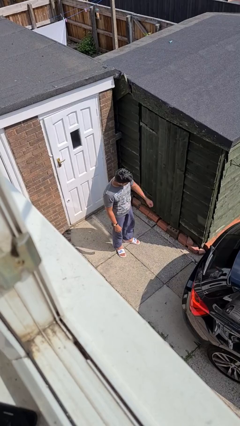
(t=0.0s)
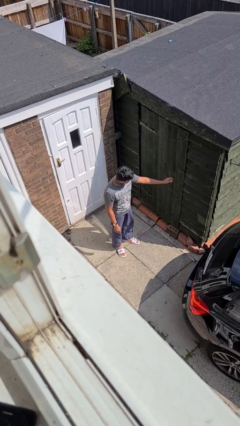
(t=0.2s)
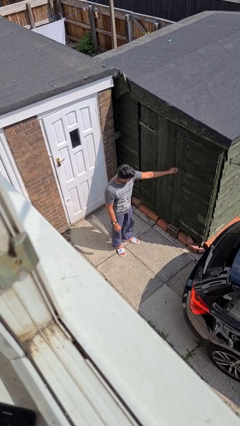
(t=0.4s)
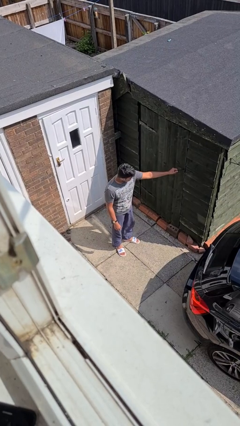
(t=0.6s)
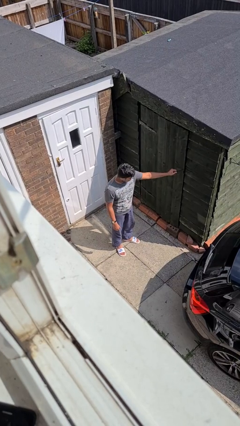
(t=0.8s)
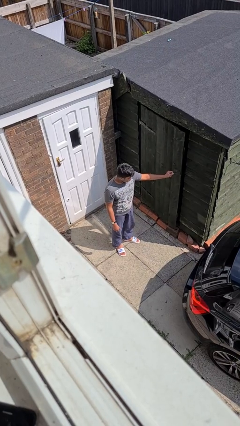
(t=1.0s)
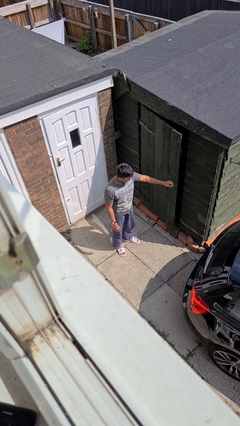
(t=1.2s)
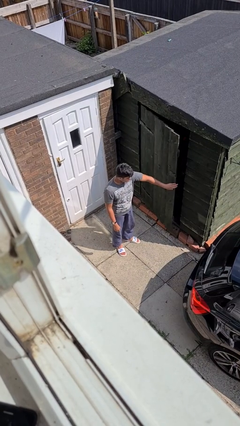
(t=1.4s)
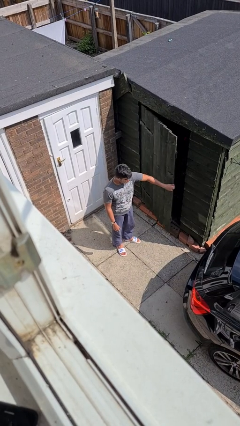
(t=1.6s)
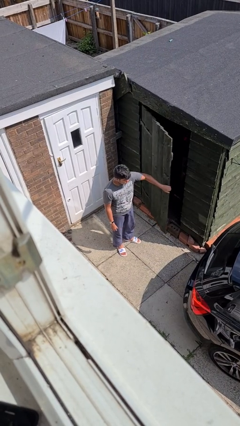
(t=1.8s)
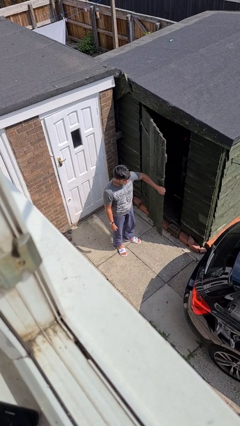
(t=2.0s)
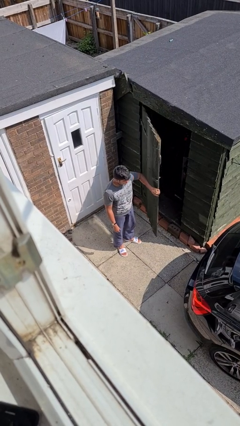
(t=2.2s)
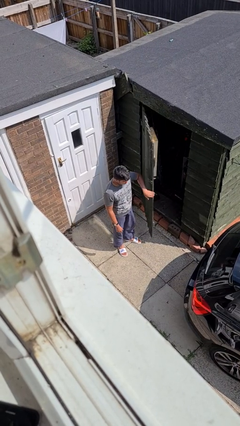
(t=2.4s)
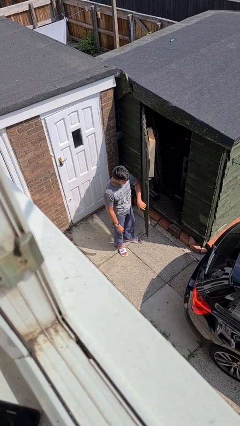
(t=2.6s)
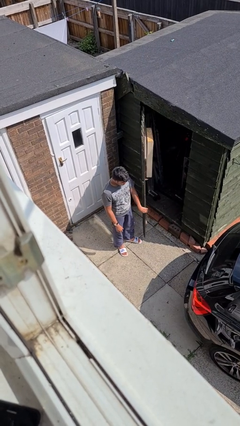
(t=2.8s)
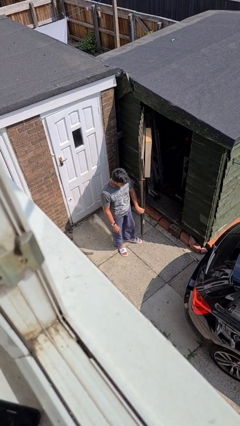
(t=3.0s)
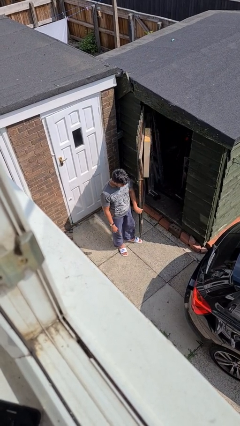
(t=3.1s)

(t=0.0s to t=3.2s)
person opens facility door

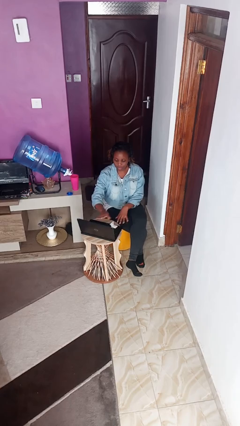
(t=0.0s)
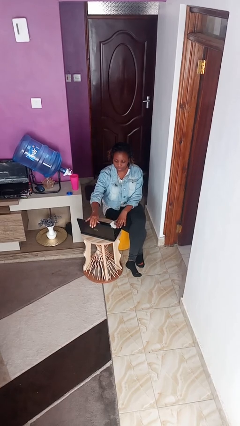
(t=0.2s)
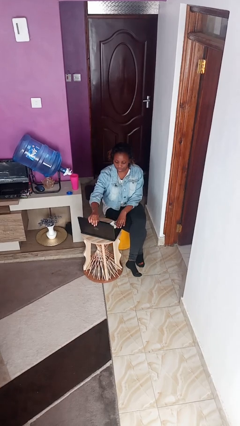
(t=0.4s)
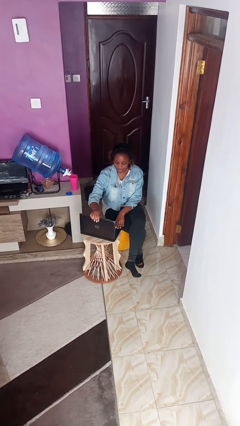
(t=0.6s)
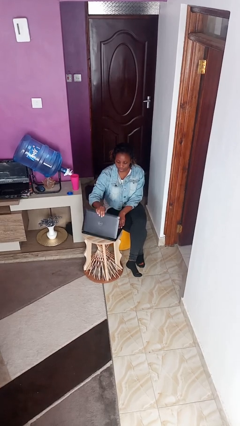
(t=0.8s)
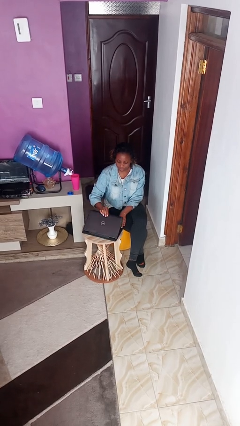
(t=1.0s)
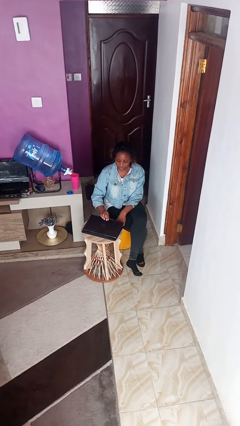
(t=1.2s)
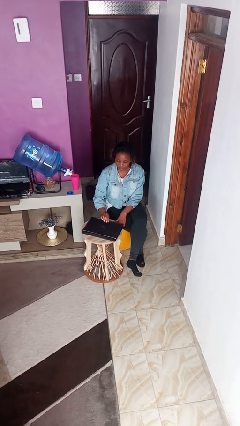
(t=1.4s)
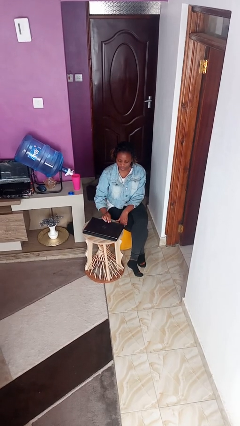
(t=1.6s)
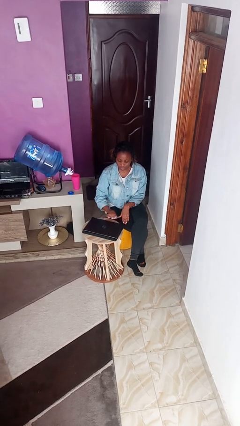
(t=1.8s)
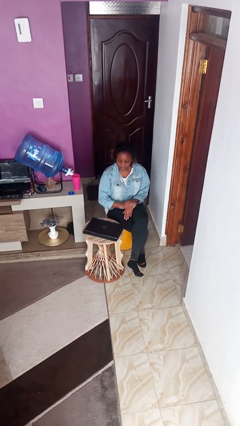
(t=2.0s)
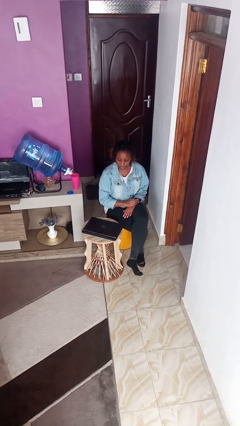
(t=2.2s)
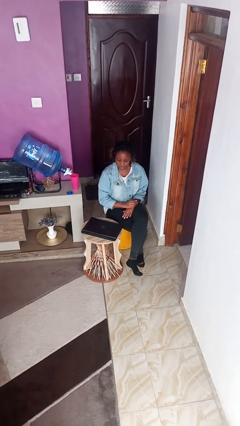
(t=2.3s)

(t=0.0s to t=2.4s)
person closes laptop

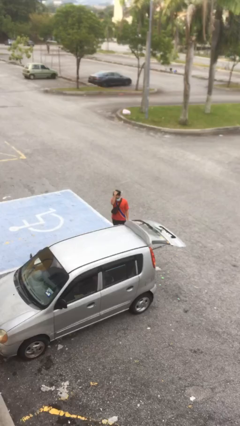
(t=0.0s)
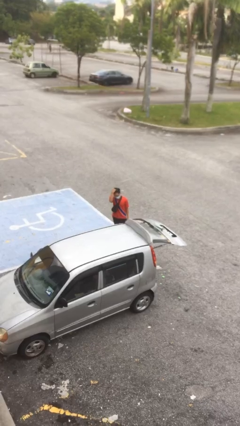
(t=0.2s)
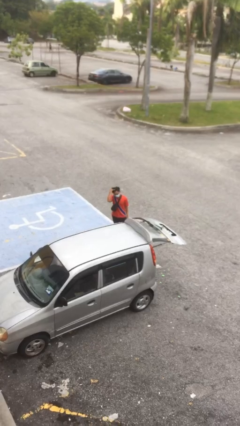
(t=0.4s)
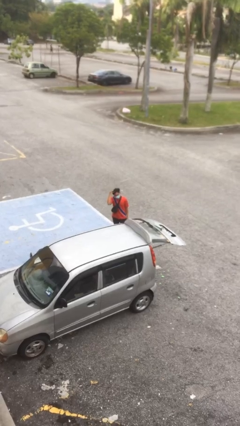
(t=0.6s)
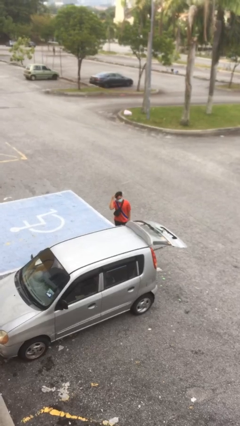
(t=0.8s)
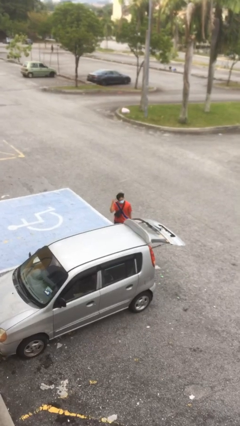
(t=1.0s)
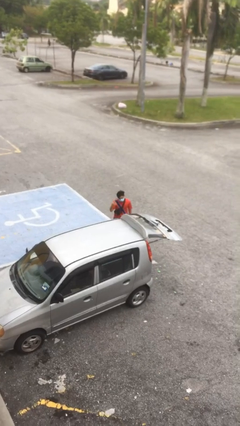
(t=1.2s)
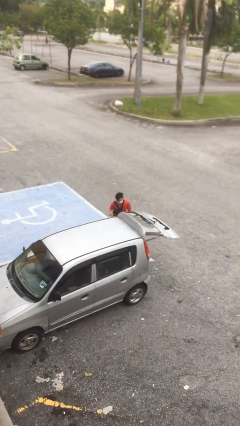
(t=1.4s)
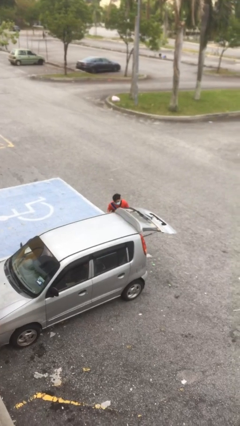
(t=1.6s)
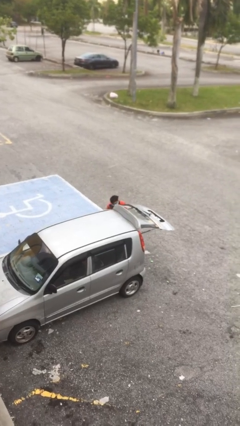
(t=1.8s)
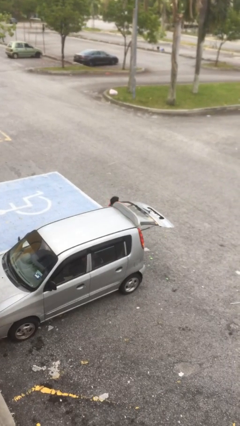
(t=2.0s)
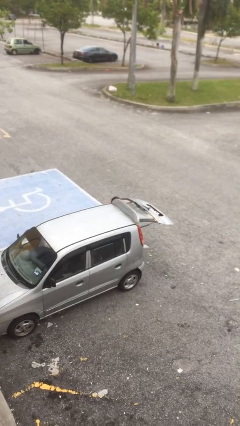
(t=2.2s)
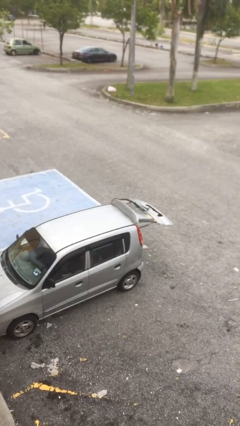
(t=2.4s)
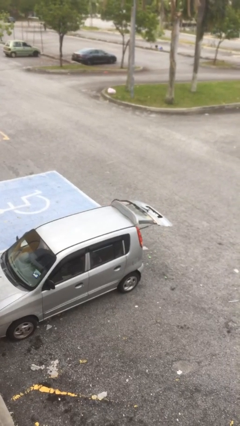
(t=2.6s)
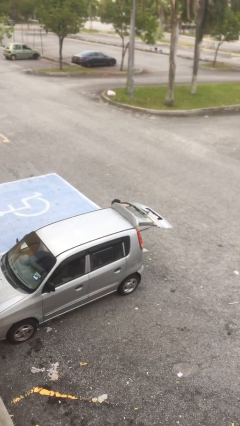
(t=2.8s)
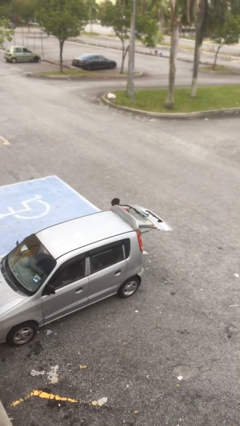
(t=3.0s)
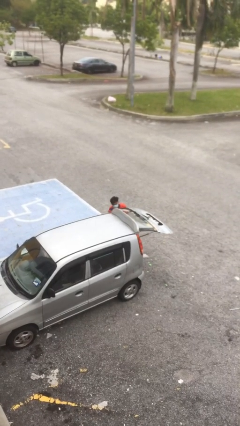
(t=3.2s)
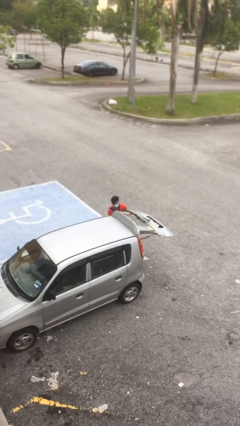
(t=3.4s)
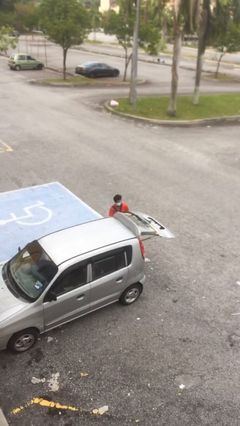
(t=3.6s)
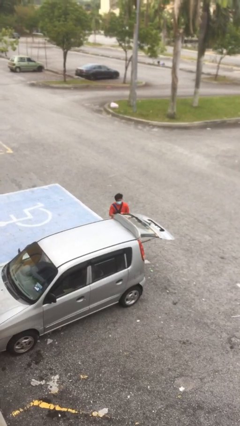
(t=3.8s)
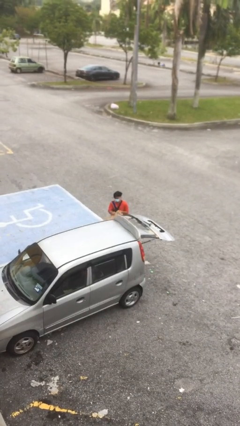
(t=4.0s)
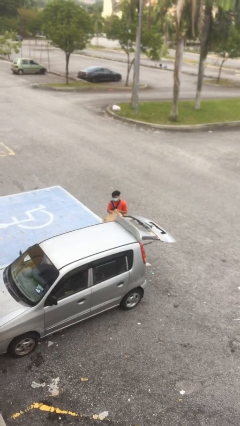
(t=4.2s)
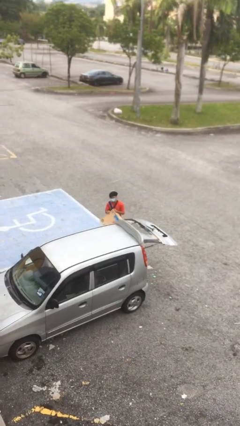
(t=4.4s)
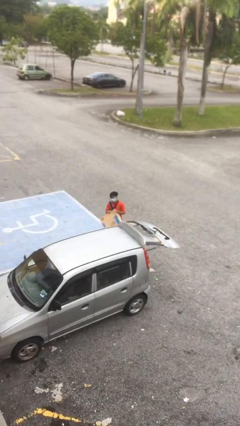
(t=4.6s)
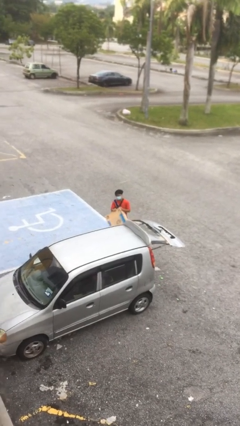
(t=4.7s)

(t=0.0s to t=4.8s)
person unloads car

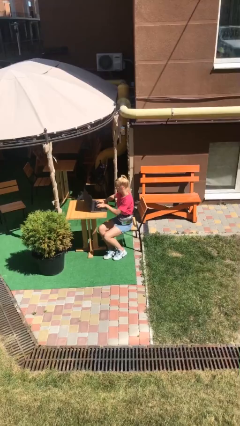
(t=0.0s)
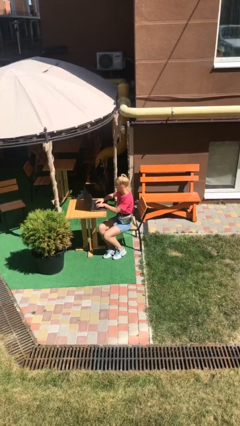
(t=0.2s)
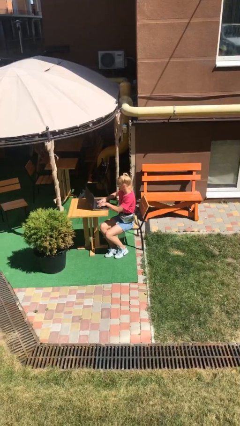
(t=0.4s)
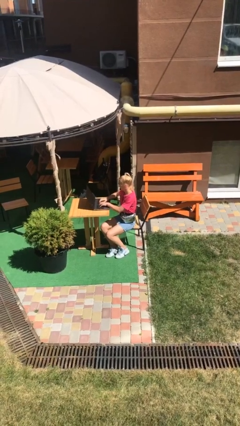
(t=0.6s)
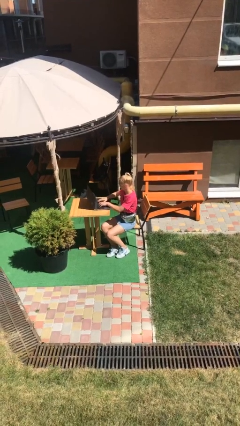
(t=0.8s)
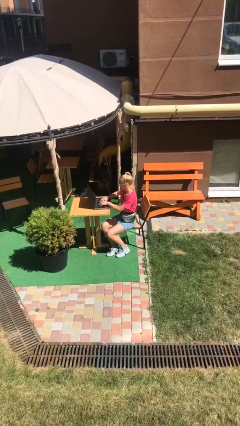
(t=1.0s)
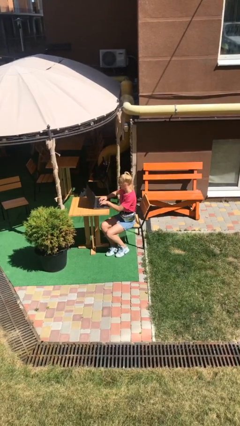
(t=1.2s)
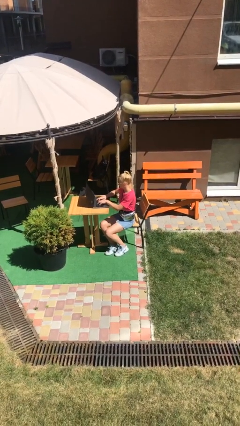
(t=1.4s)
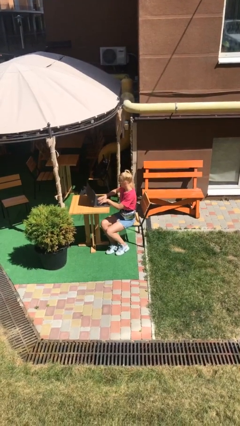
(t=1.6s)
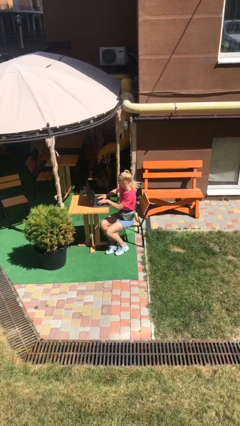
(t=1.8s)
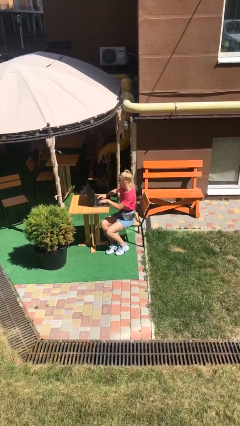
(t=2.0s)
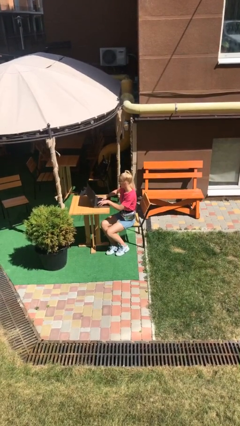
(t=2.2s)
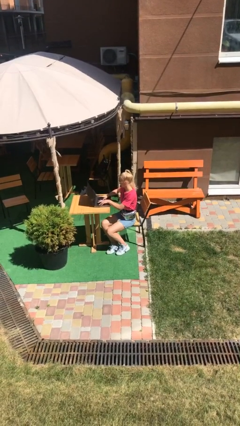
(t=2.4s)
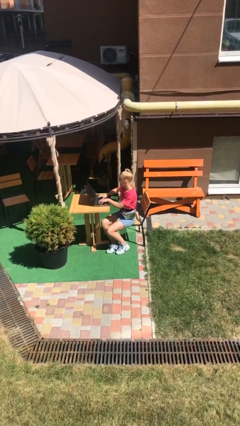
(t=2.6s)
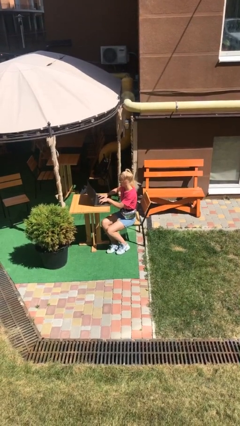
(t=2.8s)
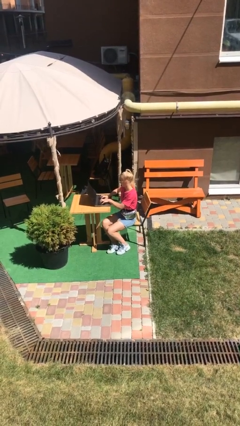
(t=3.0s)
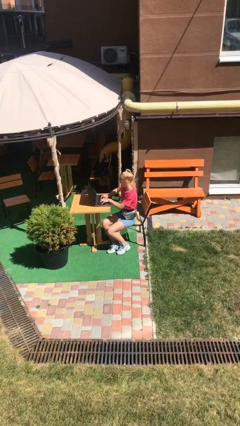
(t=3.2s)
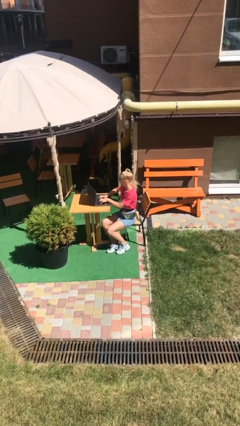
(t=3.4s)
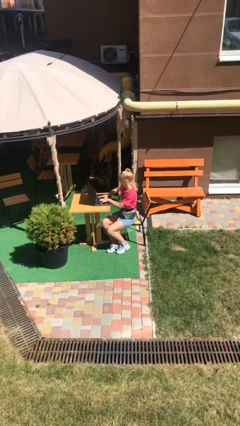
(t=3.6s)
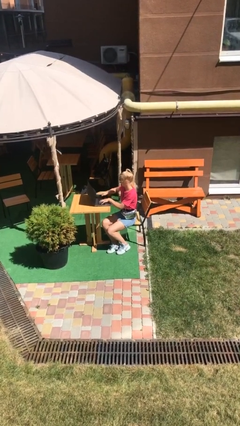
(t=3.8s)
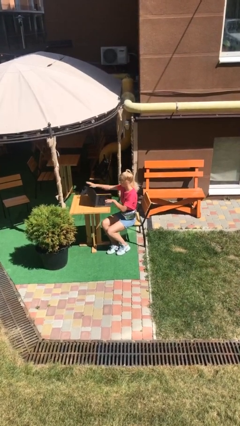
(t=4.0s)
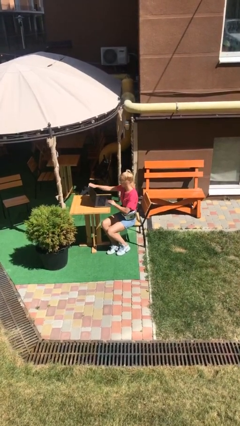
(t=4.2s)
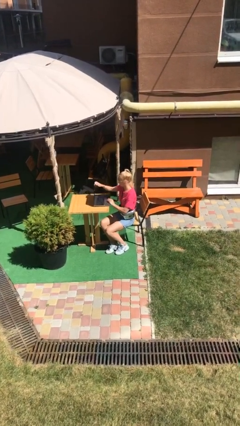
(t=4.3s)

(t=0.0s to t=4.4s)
person interacts with laptop

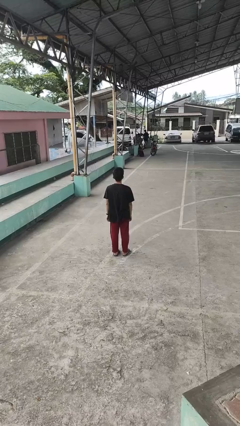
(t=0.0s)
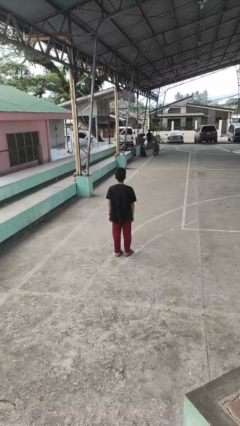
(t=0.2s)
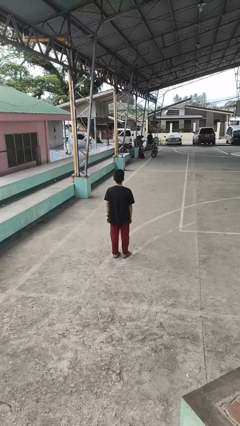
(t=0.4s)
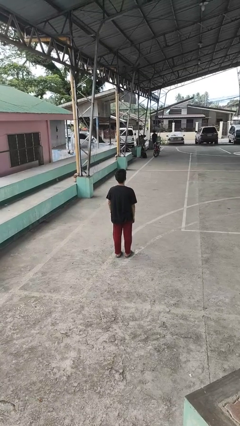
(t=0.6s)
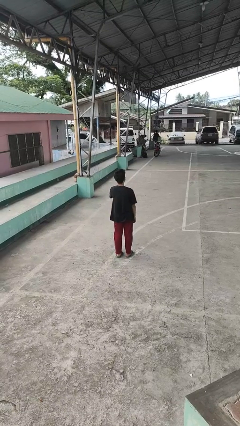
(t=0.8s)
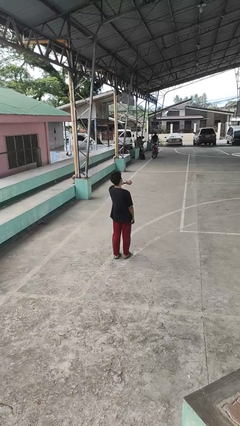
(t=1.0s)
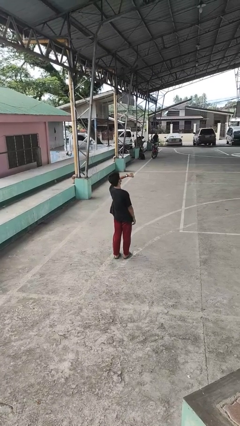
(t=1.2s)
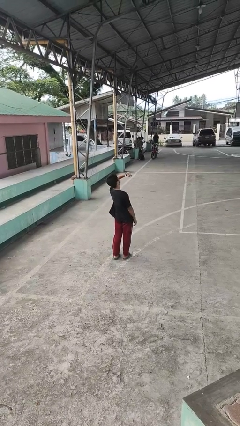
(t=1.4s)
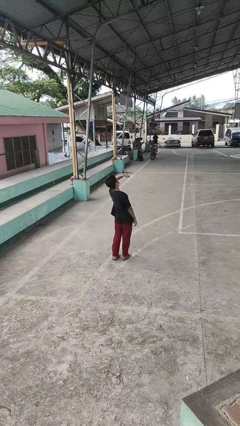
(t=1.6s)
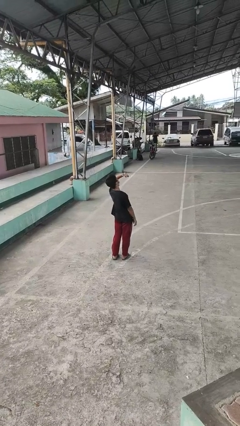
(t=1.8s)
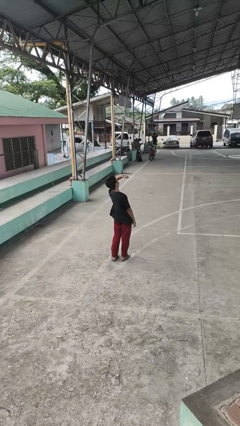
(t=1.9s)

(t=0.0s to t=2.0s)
person looks at wristwatch

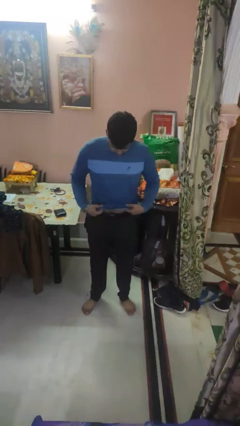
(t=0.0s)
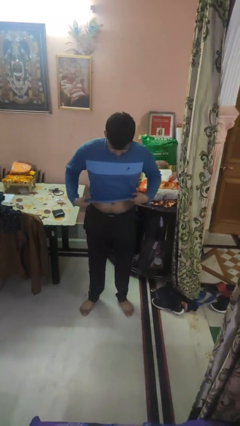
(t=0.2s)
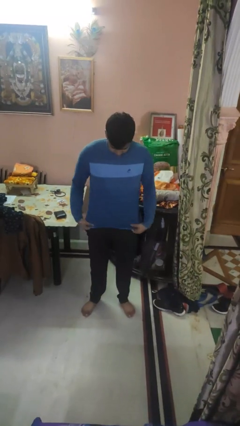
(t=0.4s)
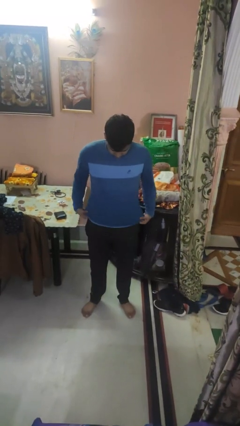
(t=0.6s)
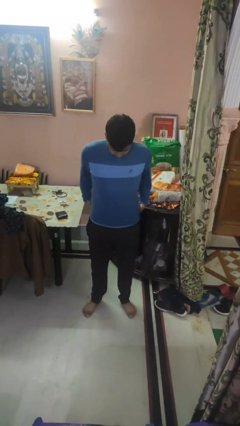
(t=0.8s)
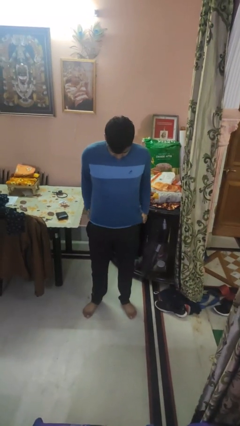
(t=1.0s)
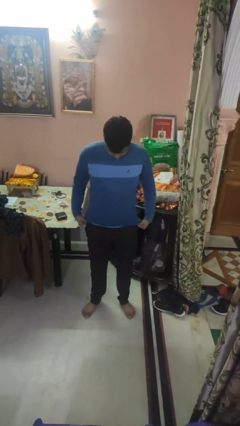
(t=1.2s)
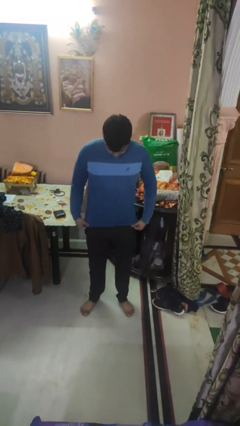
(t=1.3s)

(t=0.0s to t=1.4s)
person untucks shirt
